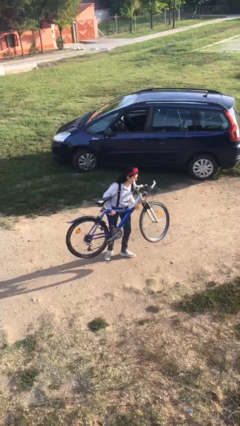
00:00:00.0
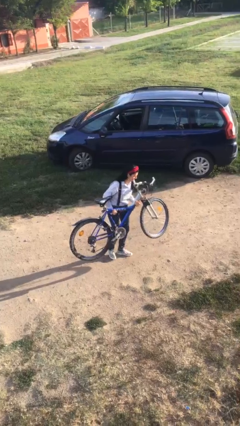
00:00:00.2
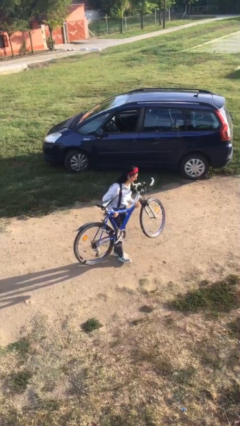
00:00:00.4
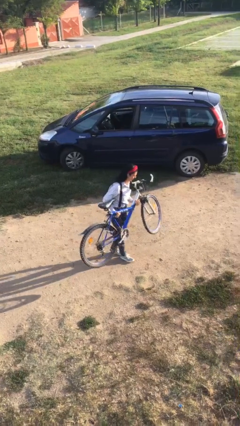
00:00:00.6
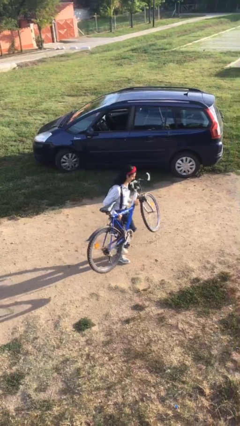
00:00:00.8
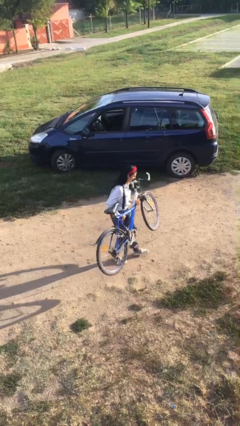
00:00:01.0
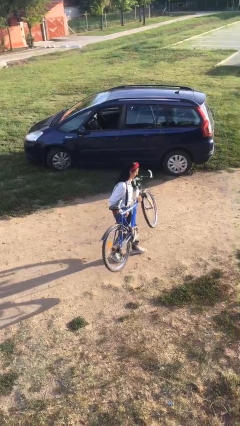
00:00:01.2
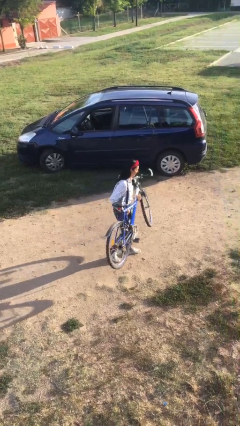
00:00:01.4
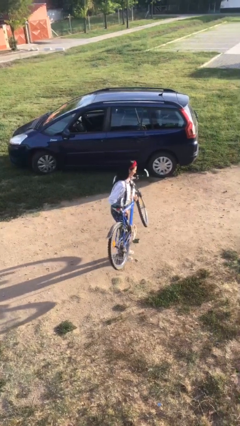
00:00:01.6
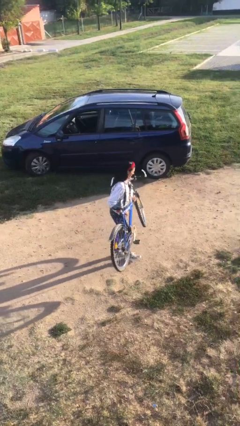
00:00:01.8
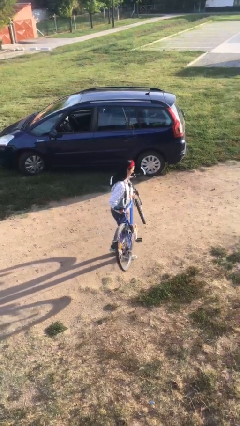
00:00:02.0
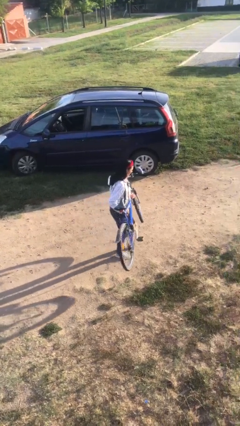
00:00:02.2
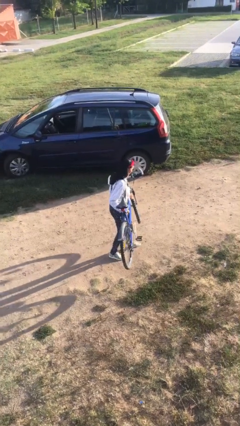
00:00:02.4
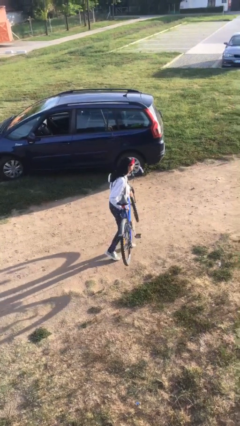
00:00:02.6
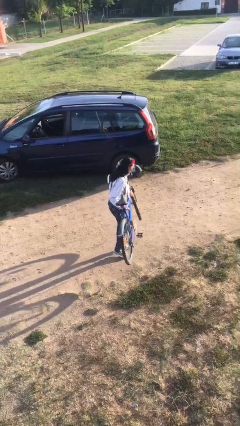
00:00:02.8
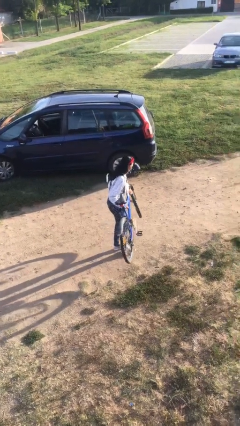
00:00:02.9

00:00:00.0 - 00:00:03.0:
person carries heavy object

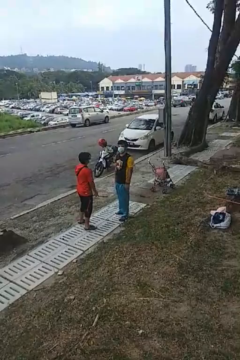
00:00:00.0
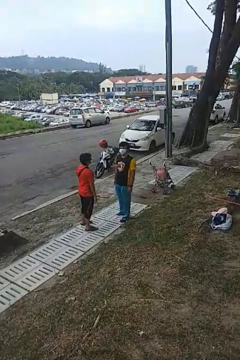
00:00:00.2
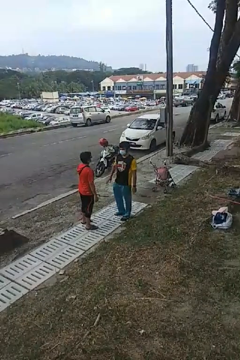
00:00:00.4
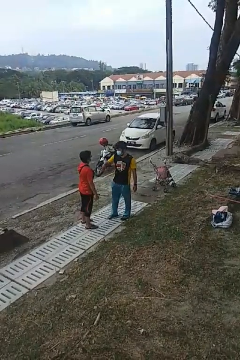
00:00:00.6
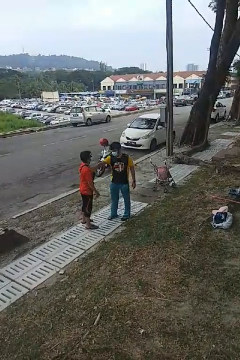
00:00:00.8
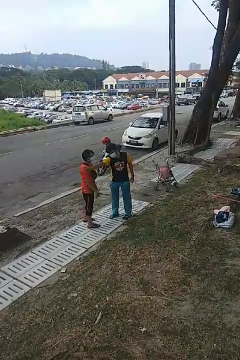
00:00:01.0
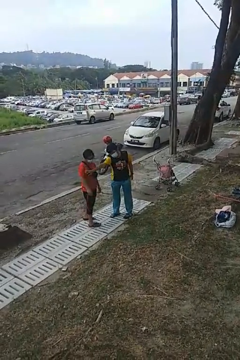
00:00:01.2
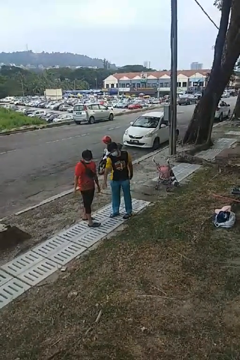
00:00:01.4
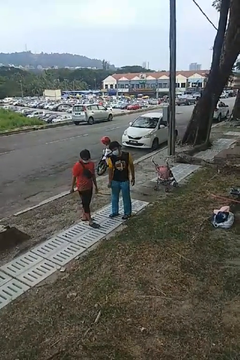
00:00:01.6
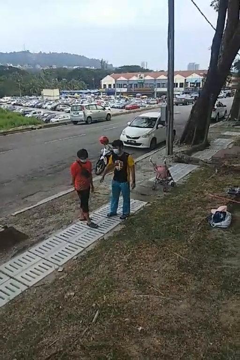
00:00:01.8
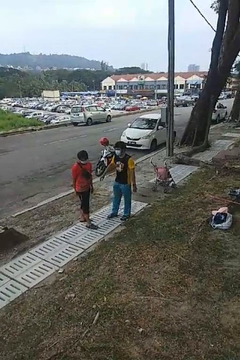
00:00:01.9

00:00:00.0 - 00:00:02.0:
person shoves person

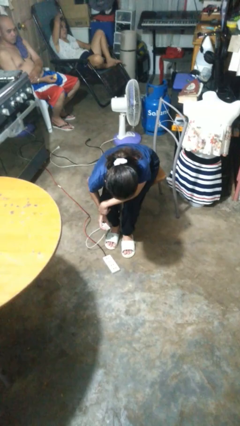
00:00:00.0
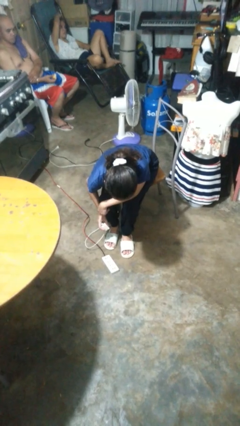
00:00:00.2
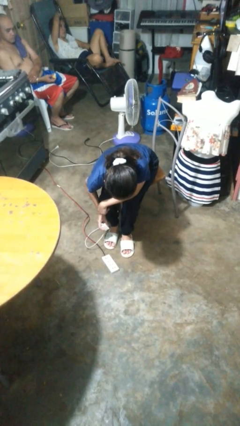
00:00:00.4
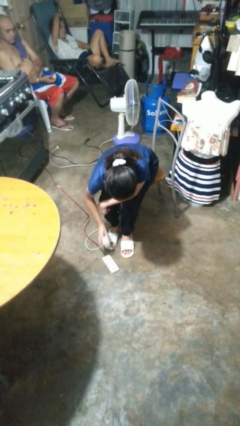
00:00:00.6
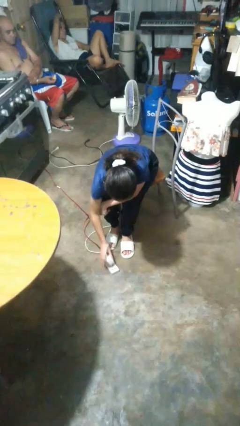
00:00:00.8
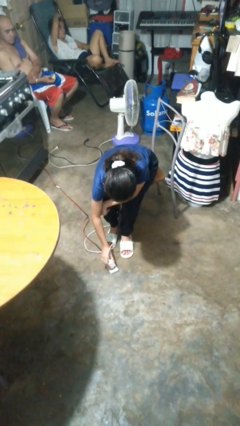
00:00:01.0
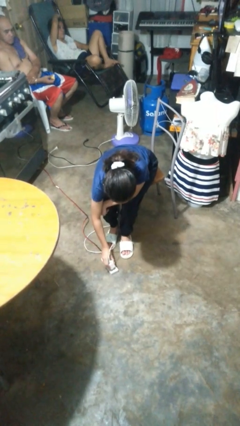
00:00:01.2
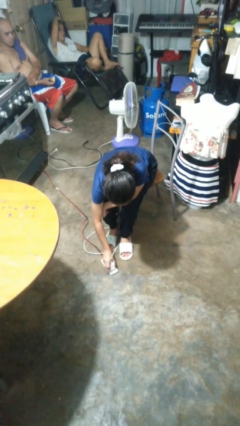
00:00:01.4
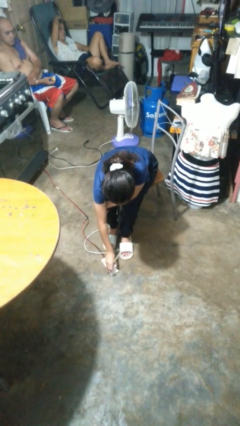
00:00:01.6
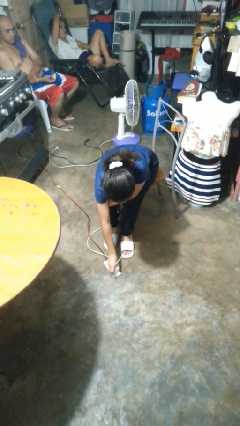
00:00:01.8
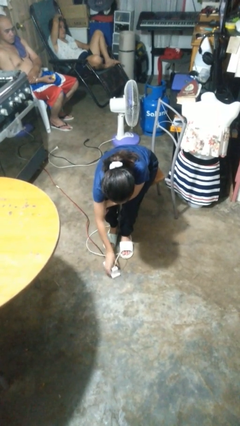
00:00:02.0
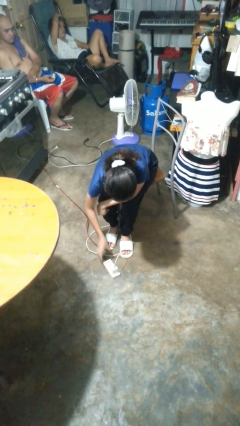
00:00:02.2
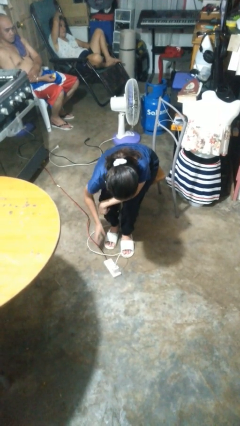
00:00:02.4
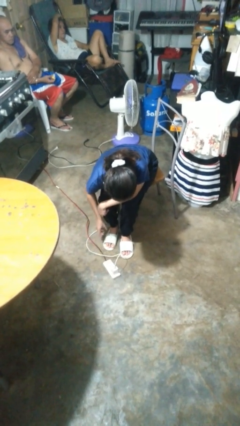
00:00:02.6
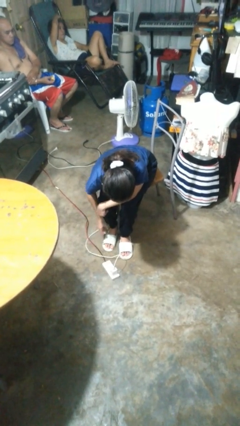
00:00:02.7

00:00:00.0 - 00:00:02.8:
person plugs into electrical socket

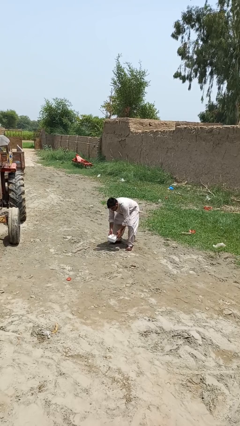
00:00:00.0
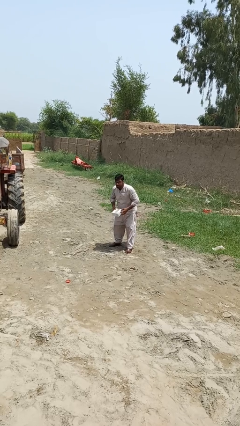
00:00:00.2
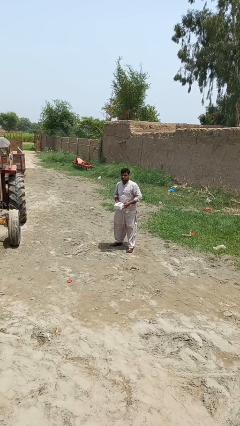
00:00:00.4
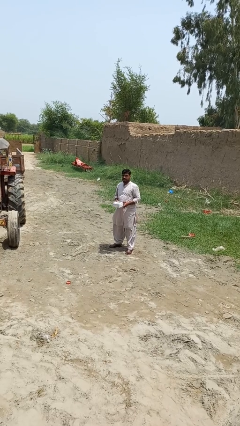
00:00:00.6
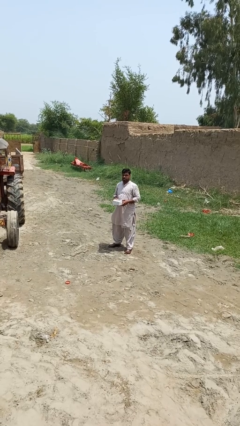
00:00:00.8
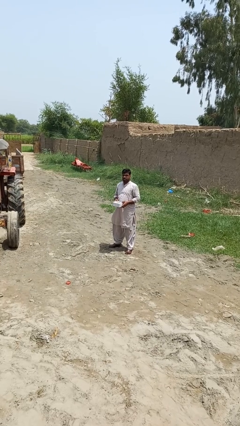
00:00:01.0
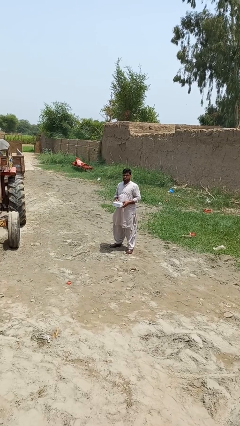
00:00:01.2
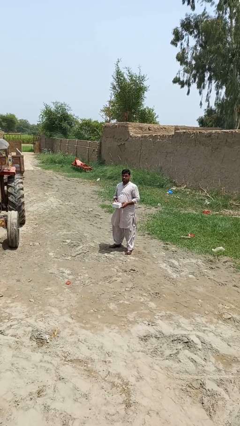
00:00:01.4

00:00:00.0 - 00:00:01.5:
person picks up object from floor

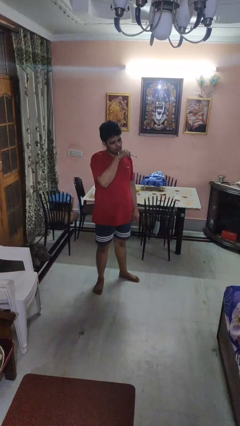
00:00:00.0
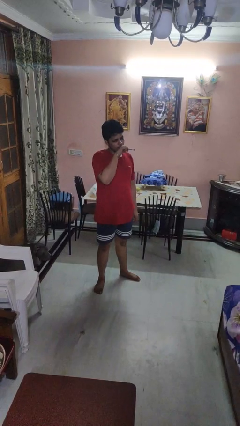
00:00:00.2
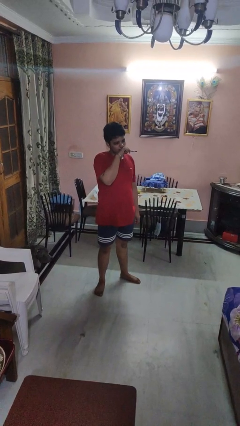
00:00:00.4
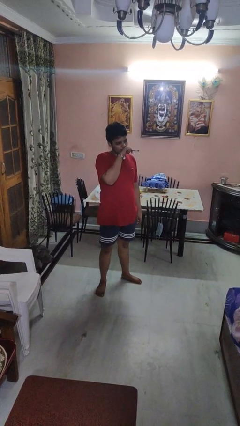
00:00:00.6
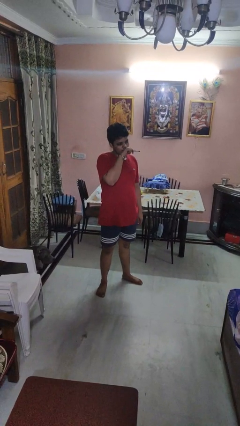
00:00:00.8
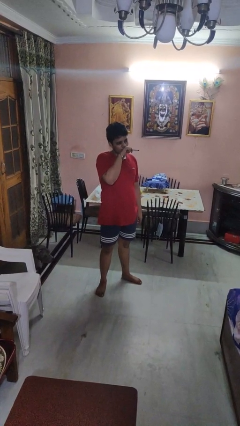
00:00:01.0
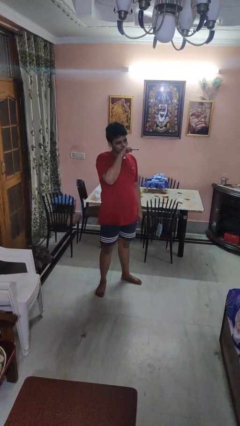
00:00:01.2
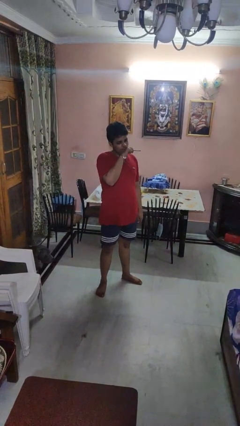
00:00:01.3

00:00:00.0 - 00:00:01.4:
person vapes

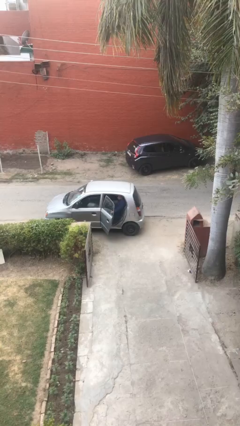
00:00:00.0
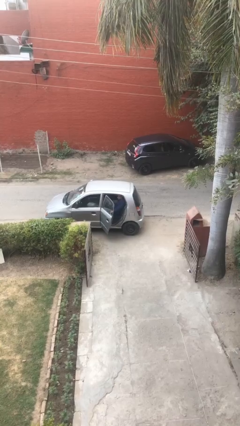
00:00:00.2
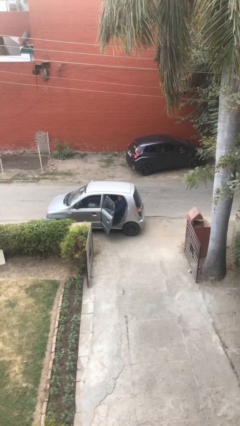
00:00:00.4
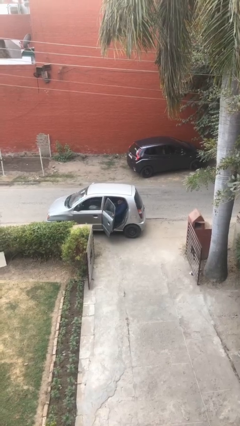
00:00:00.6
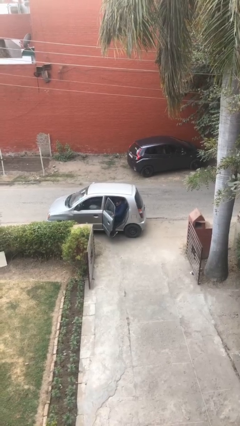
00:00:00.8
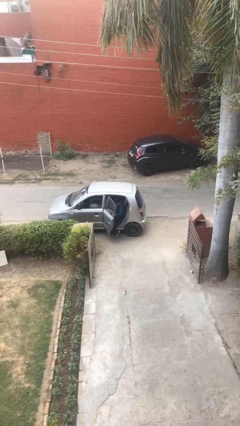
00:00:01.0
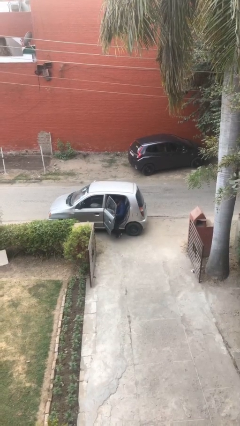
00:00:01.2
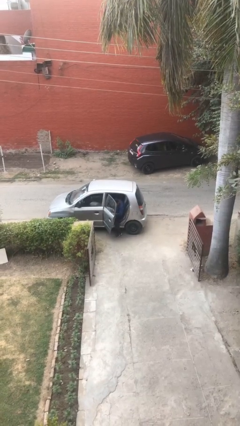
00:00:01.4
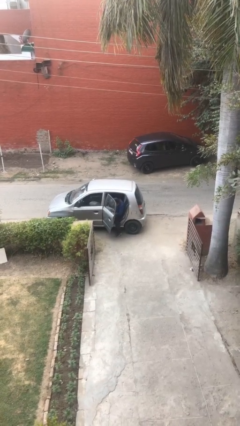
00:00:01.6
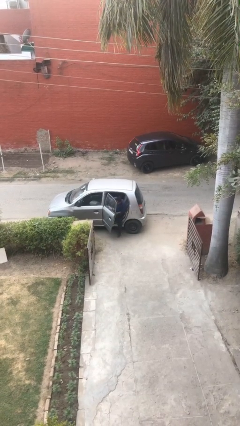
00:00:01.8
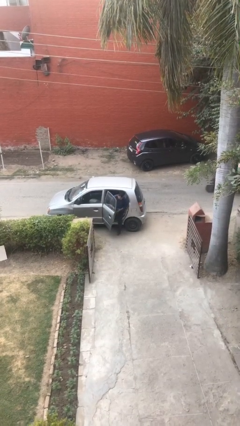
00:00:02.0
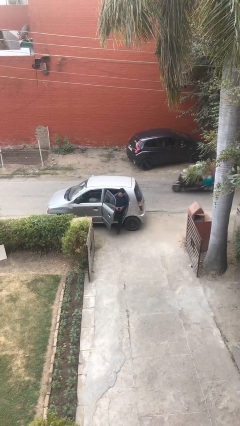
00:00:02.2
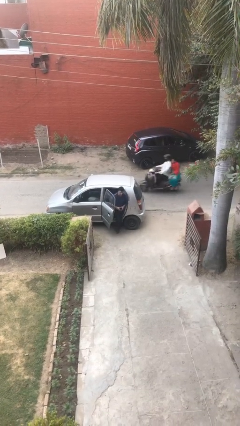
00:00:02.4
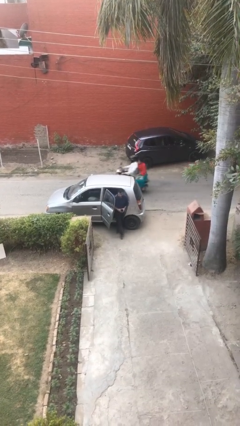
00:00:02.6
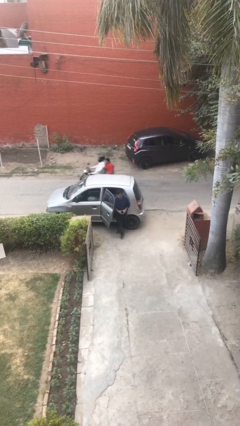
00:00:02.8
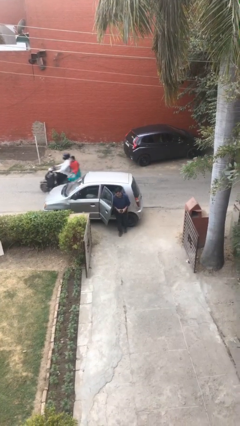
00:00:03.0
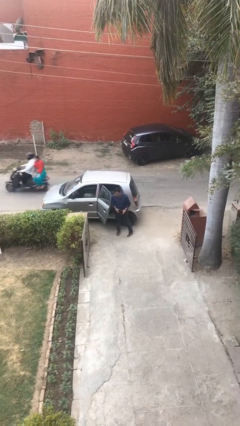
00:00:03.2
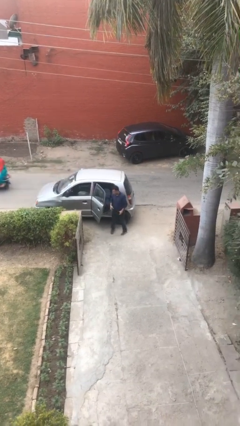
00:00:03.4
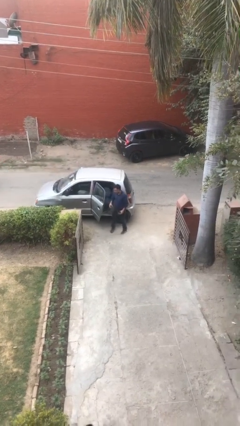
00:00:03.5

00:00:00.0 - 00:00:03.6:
person exits car

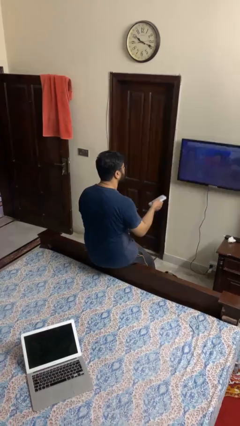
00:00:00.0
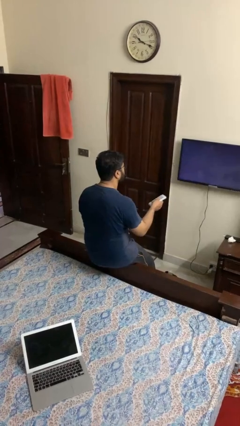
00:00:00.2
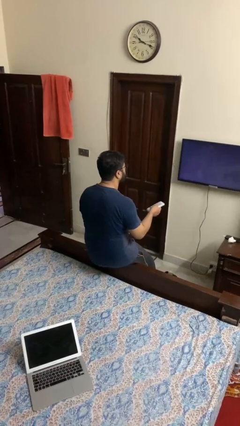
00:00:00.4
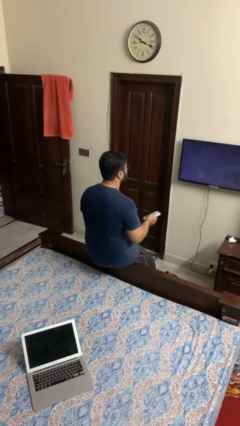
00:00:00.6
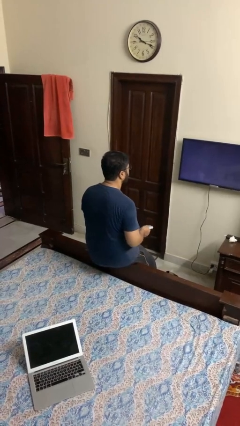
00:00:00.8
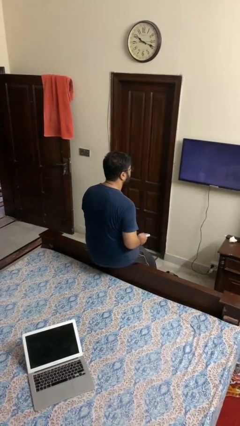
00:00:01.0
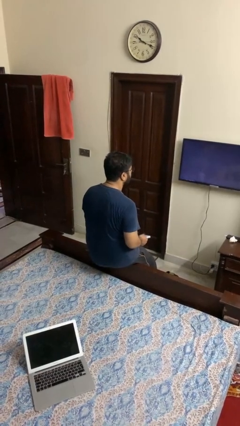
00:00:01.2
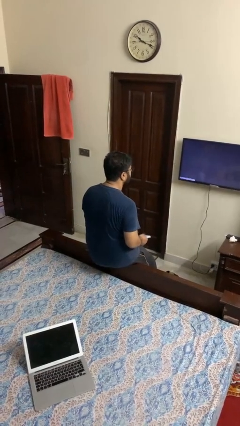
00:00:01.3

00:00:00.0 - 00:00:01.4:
person uses television remote

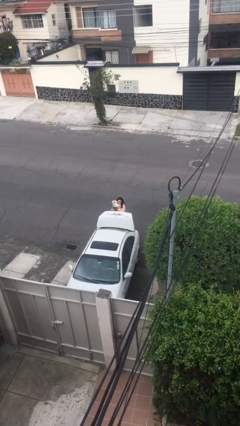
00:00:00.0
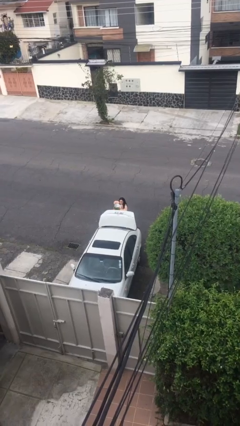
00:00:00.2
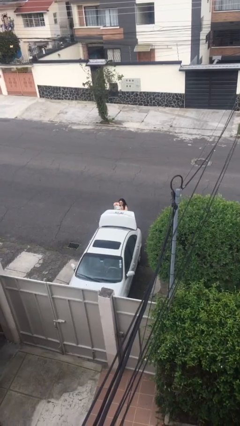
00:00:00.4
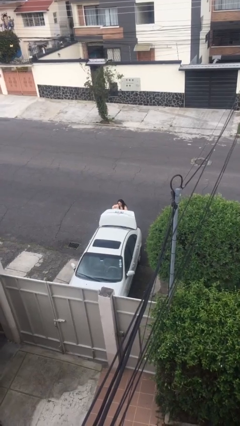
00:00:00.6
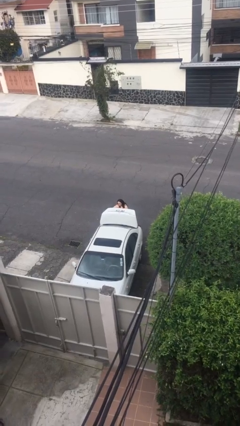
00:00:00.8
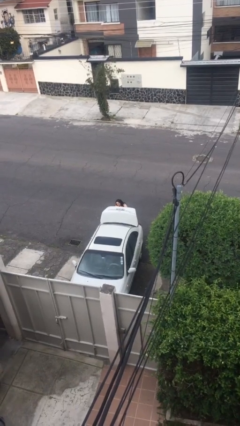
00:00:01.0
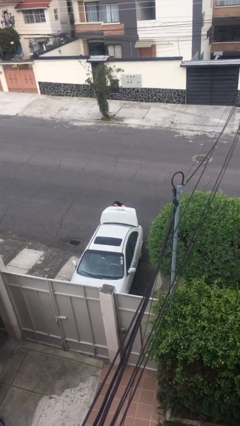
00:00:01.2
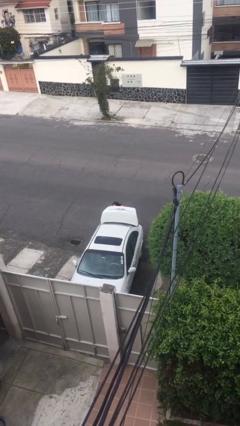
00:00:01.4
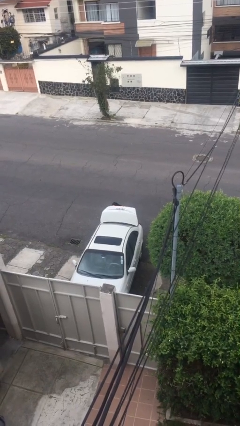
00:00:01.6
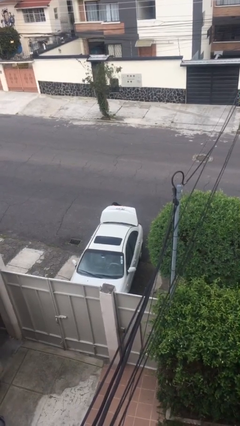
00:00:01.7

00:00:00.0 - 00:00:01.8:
person loads car
